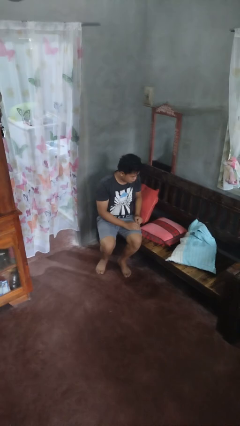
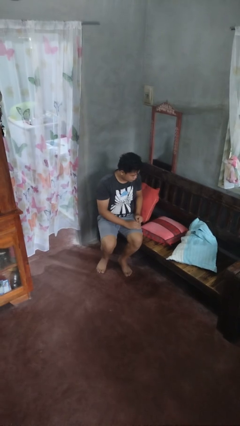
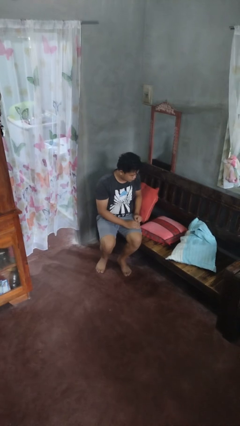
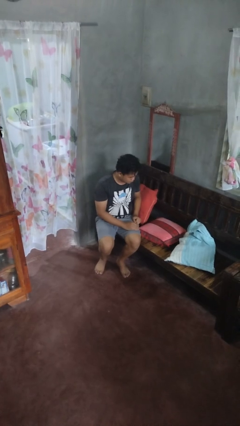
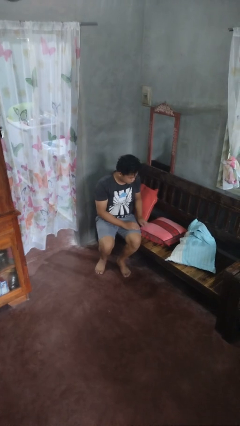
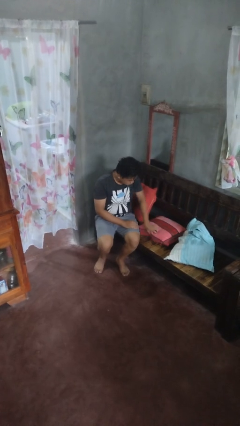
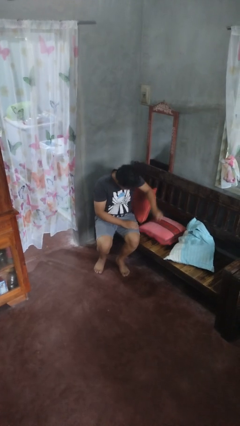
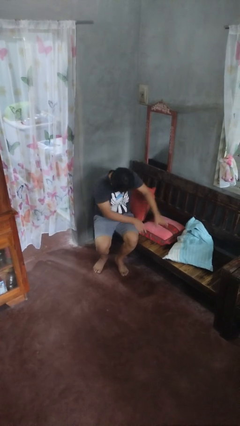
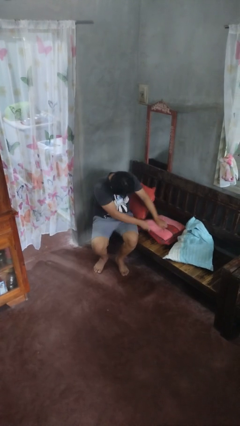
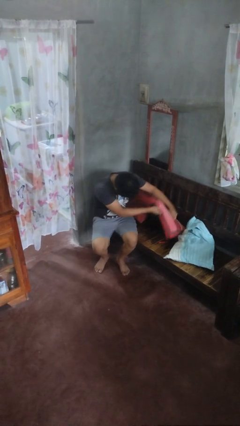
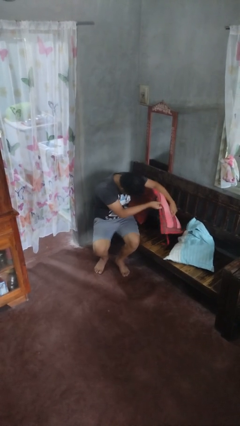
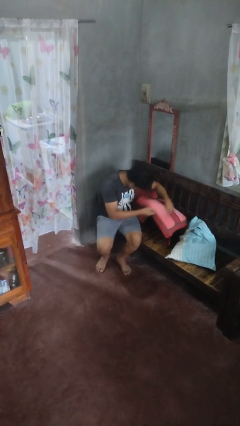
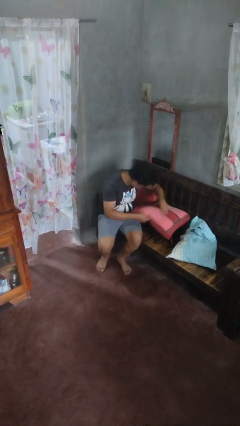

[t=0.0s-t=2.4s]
person searches in couch

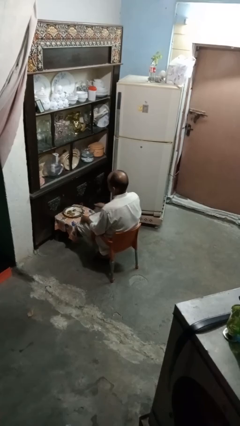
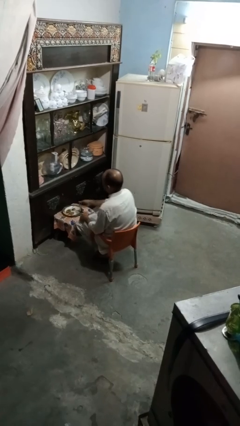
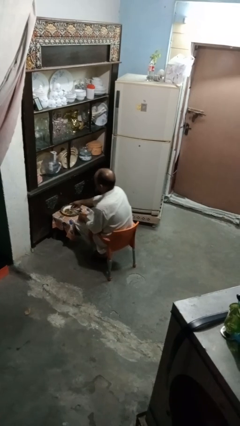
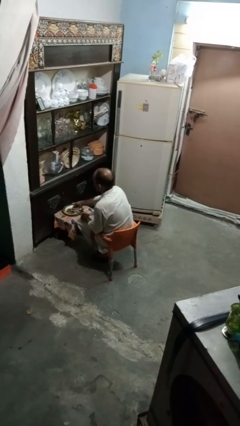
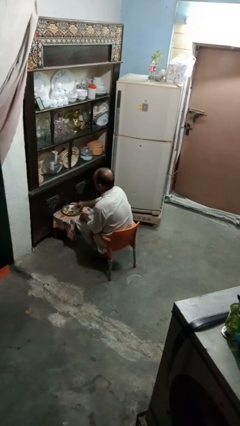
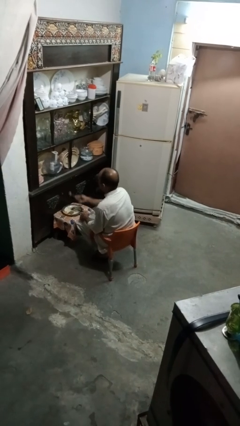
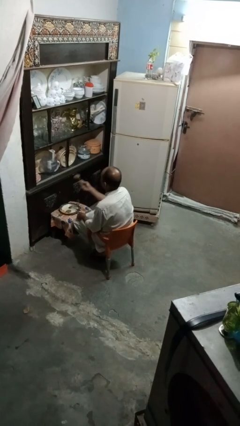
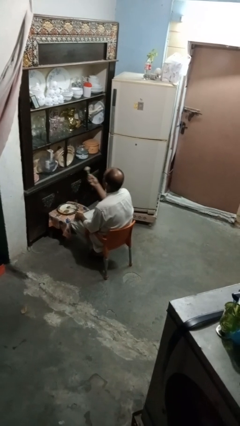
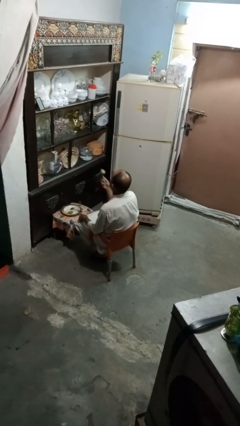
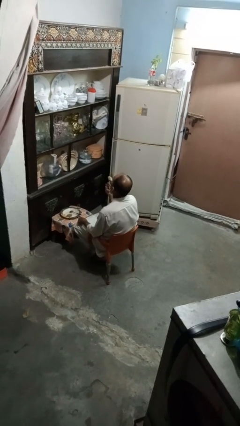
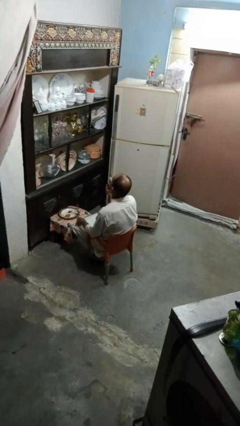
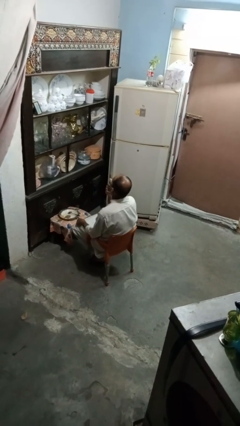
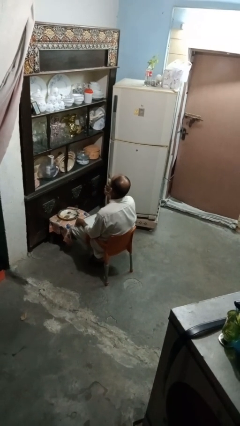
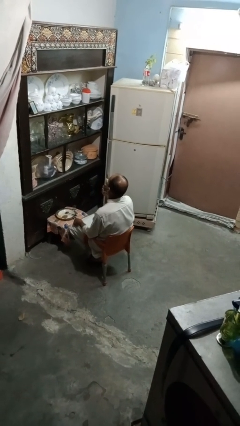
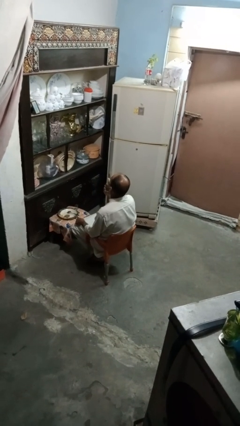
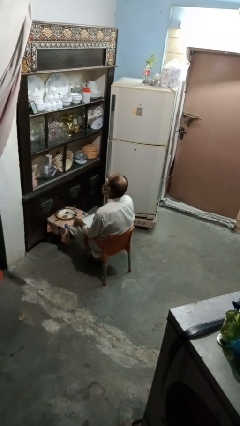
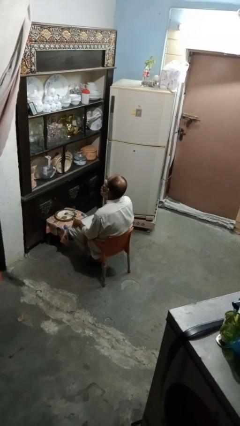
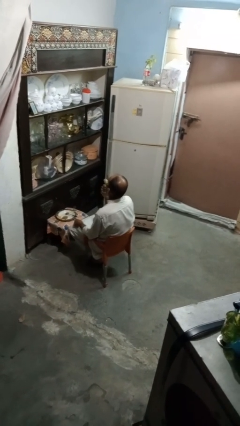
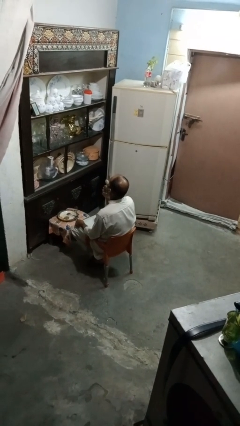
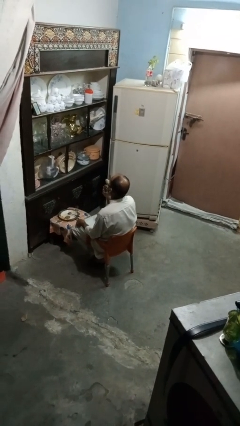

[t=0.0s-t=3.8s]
person eats with utensil

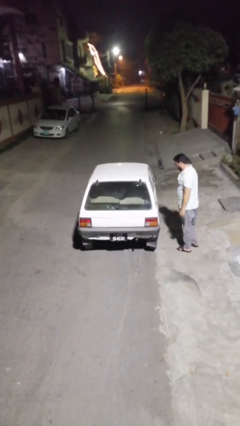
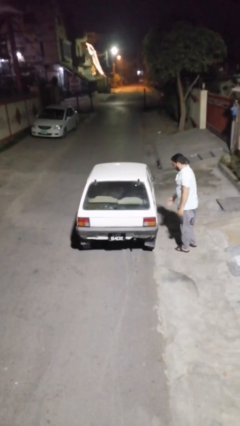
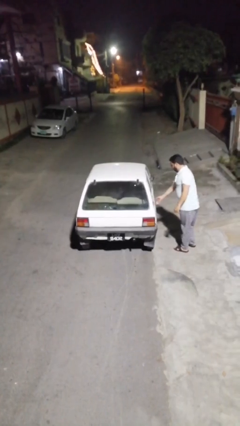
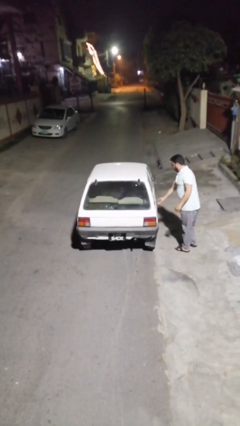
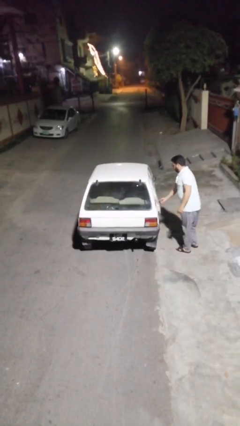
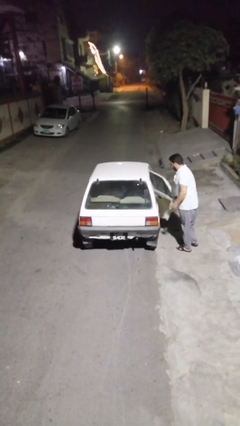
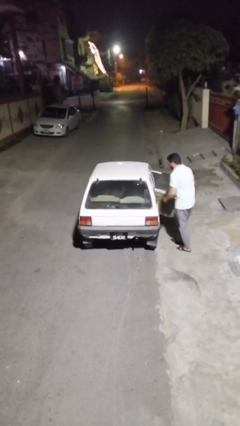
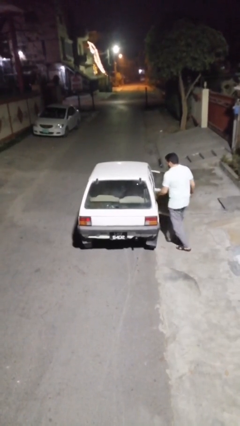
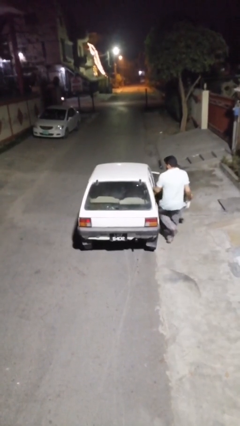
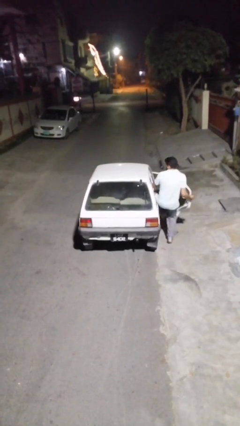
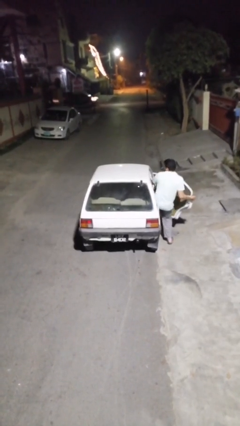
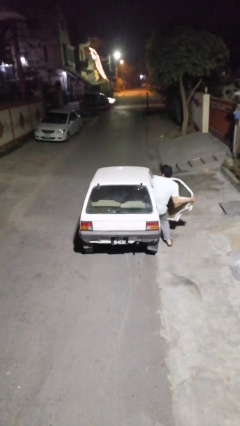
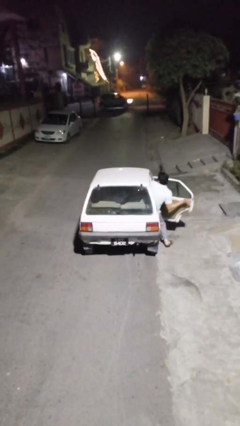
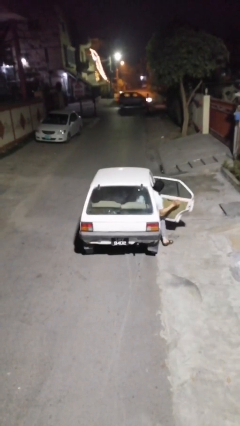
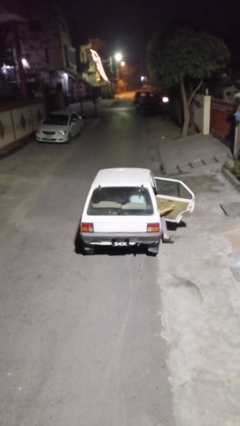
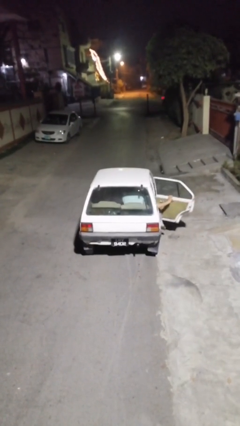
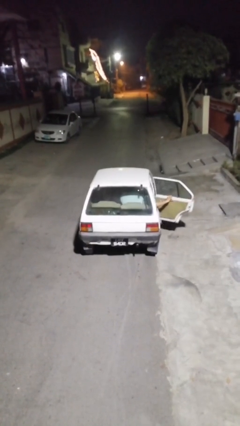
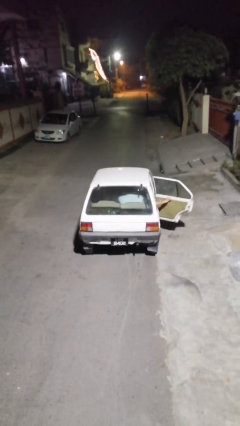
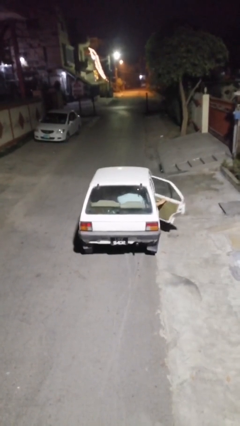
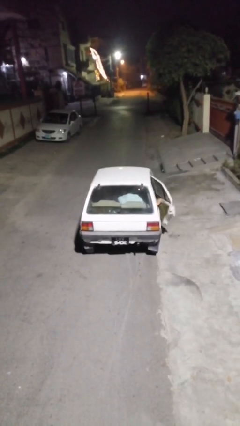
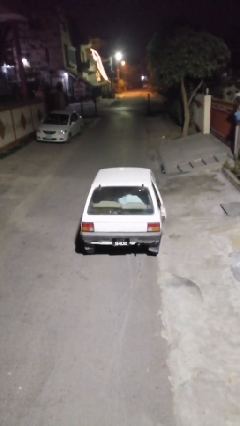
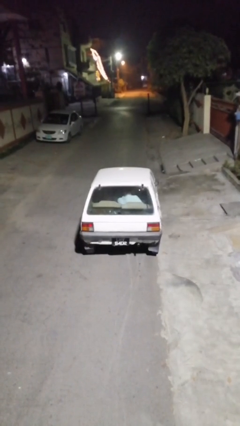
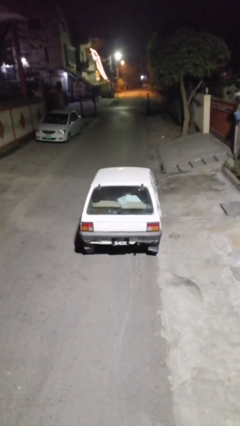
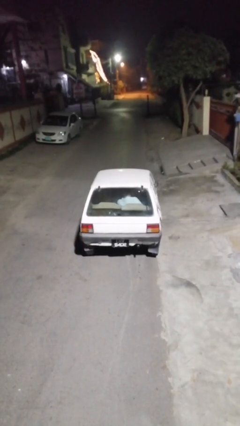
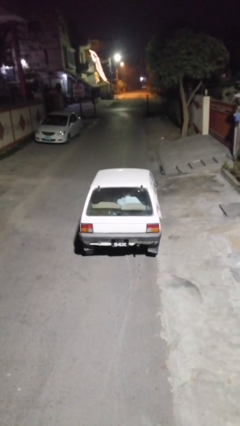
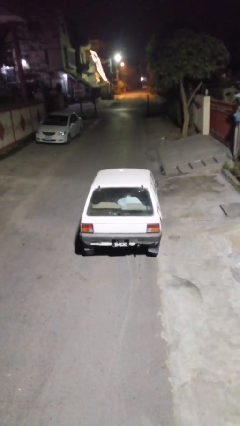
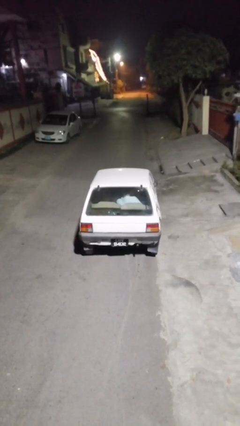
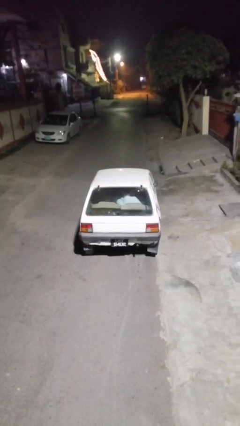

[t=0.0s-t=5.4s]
car picks up person

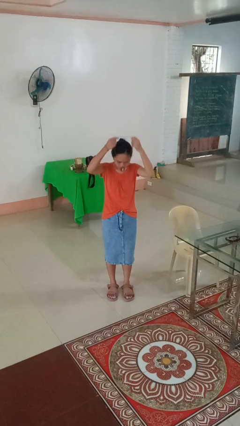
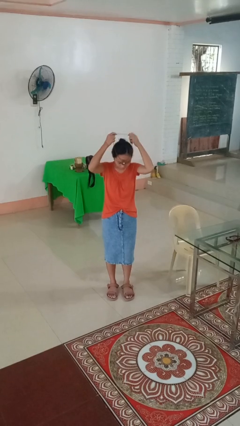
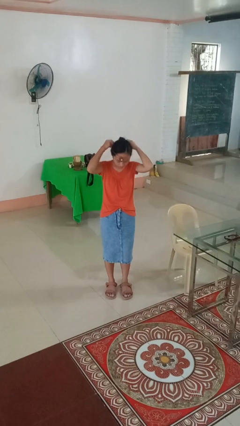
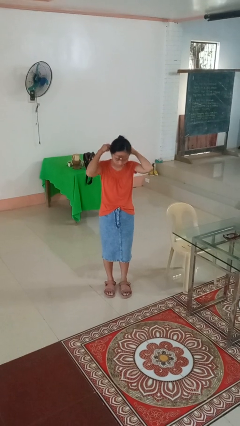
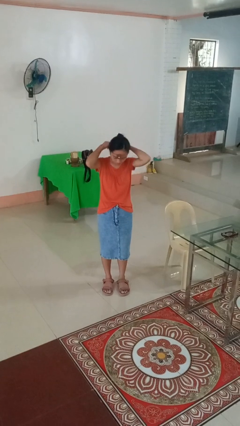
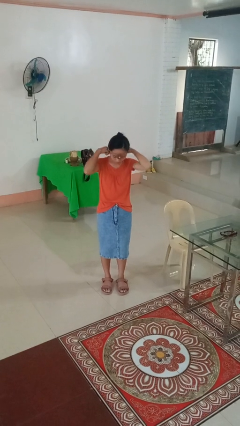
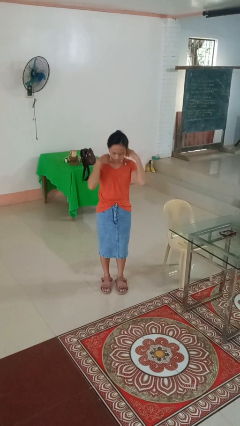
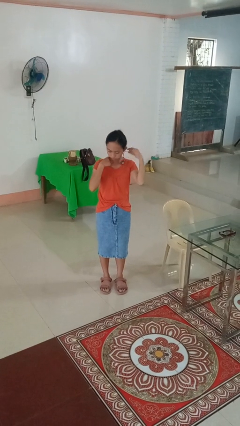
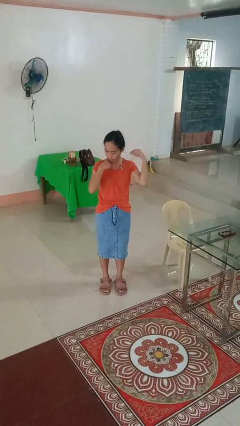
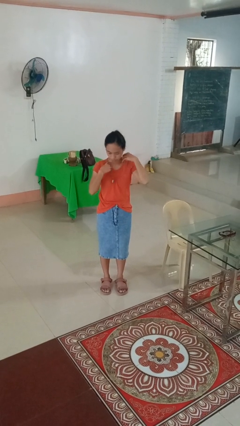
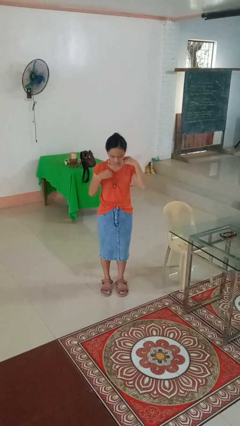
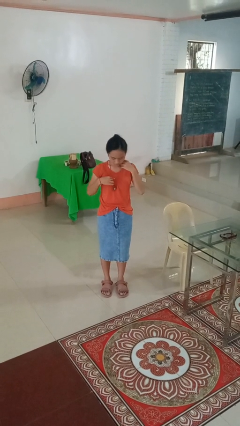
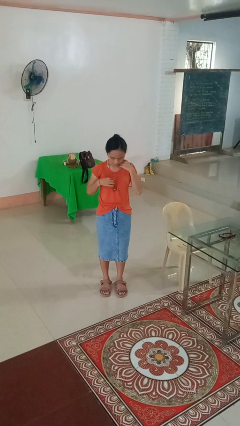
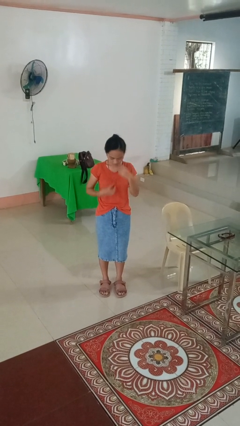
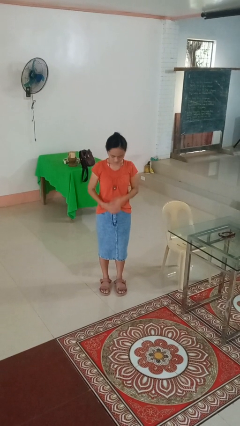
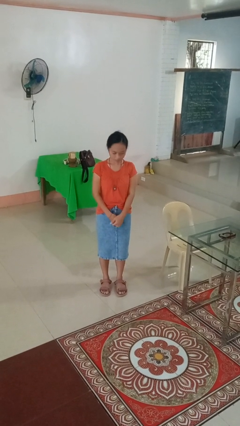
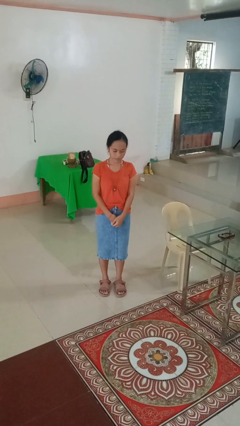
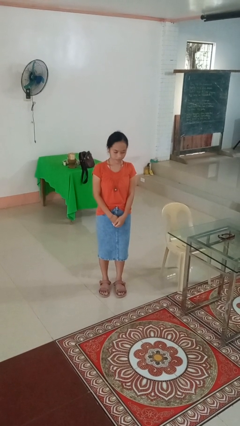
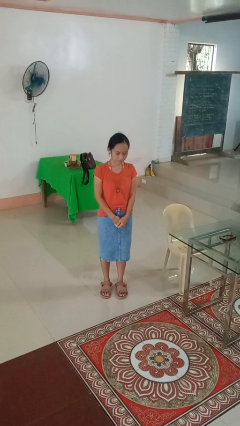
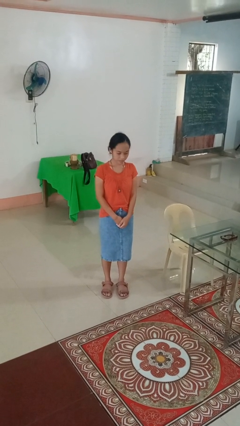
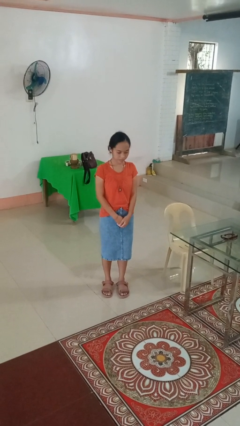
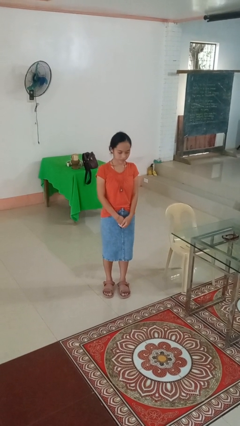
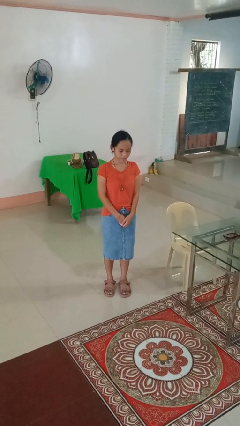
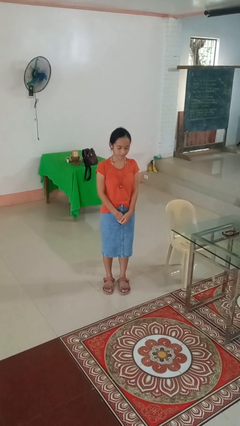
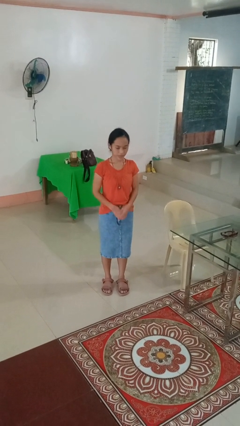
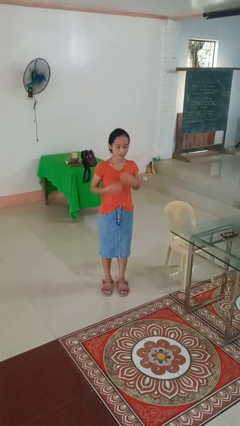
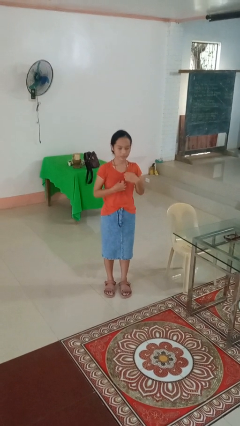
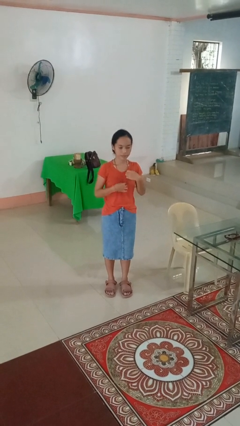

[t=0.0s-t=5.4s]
person puts on necklace

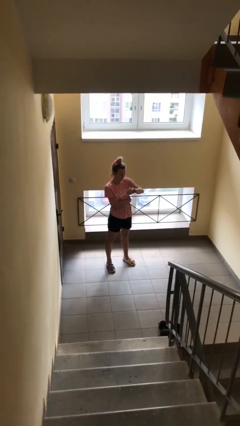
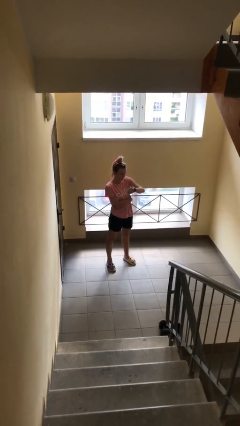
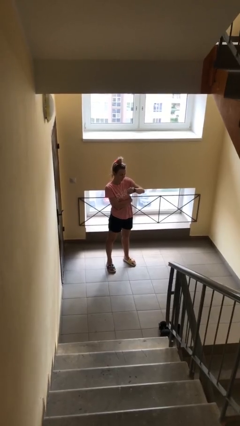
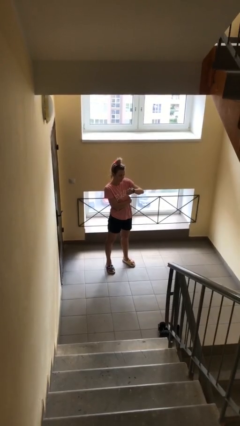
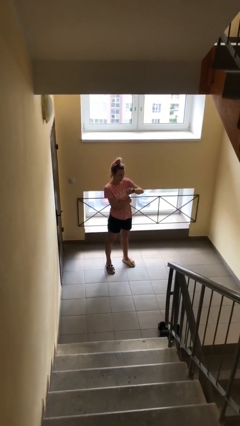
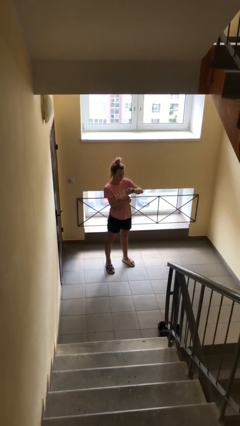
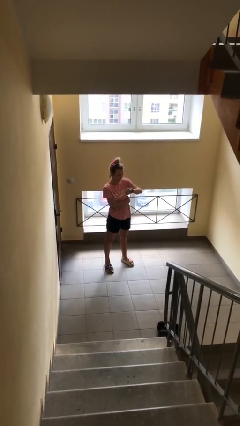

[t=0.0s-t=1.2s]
person looks at wristwatch
